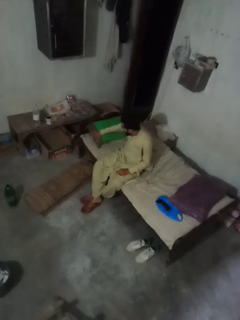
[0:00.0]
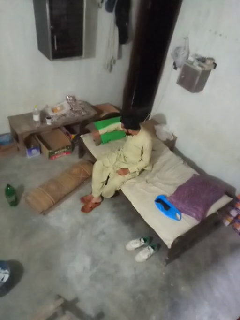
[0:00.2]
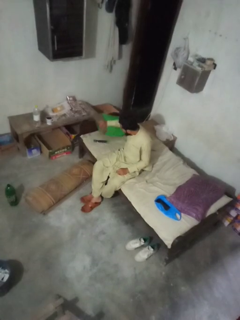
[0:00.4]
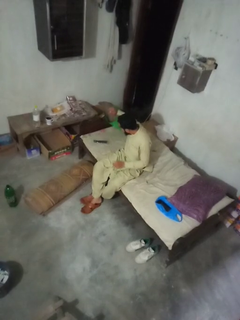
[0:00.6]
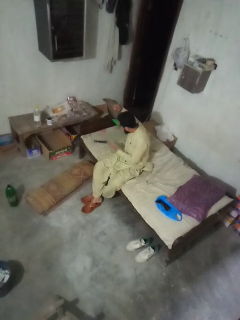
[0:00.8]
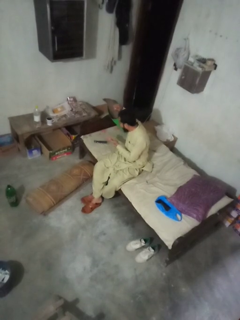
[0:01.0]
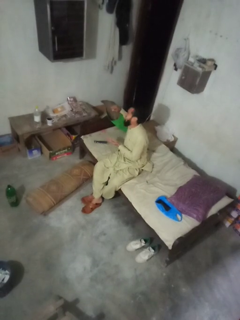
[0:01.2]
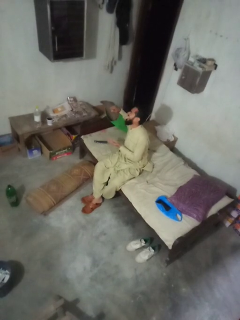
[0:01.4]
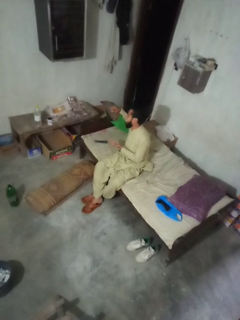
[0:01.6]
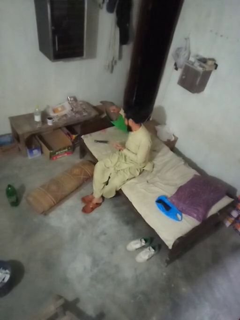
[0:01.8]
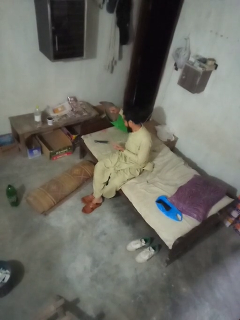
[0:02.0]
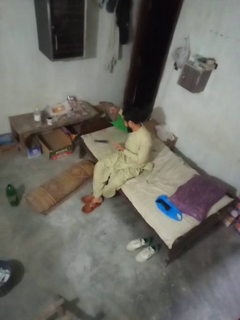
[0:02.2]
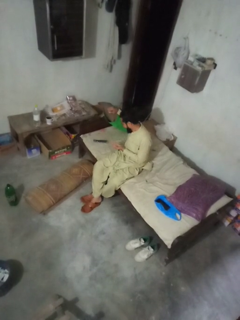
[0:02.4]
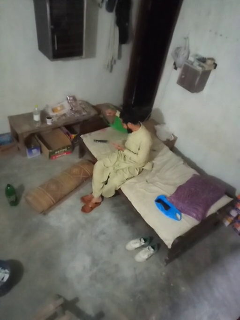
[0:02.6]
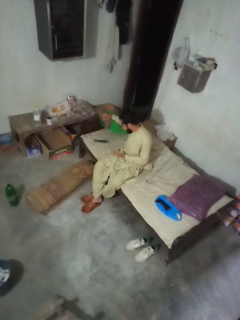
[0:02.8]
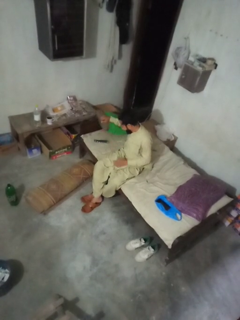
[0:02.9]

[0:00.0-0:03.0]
person searches under couch

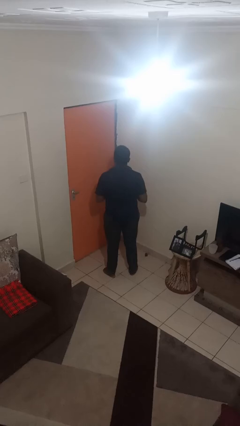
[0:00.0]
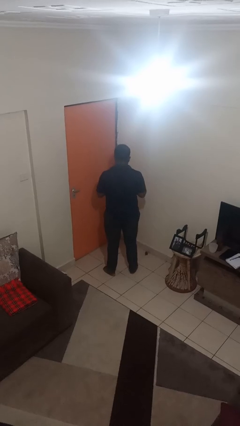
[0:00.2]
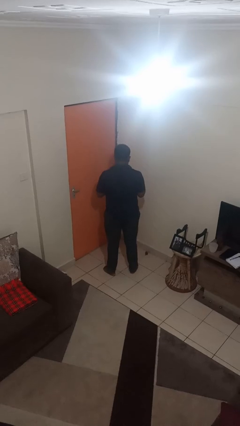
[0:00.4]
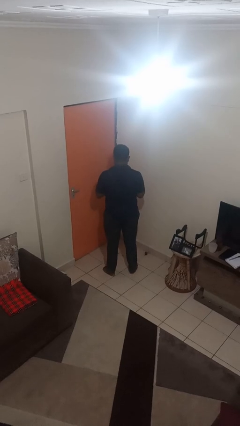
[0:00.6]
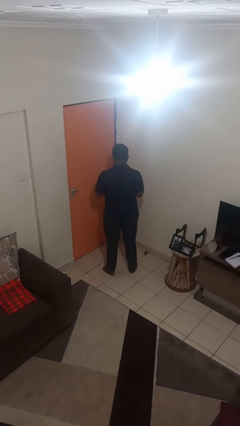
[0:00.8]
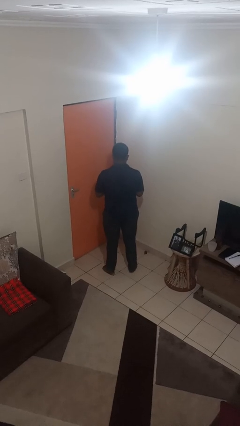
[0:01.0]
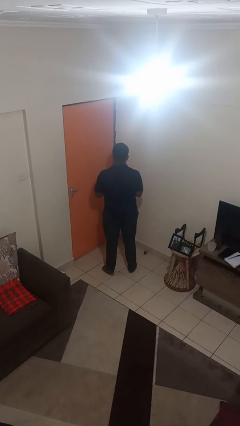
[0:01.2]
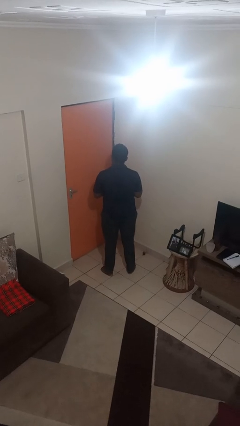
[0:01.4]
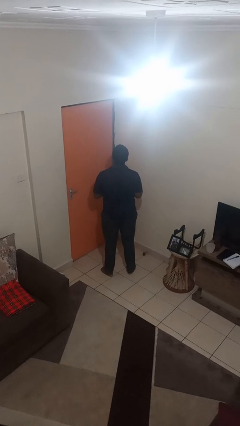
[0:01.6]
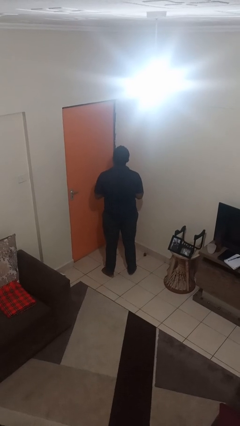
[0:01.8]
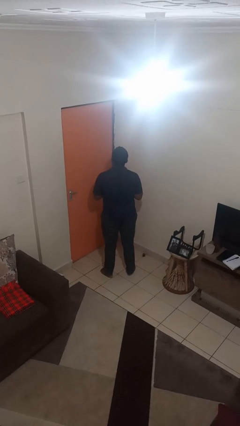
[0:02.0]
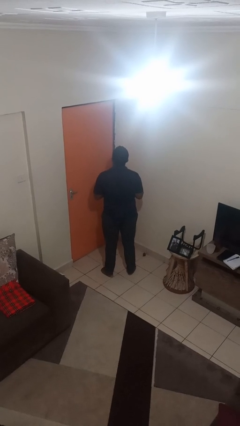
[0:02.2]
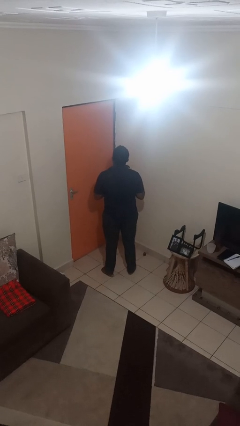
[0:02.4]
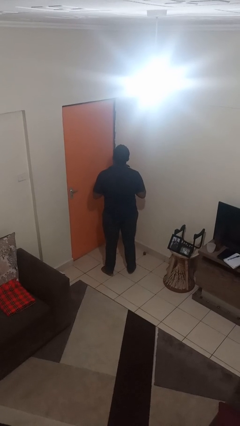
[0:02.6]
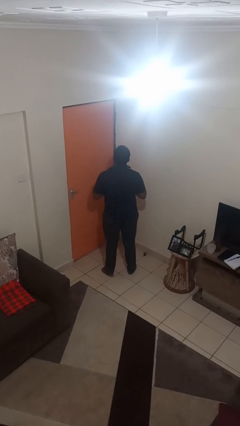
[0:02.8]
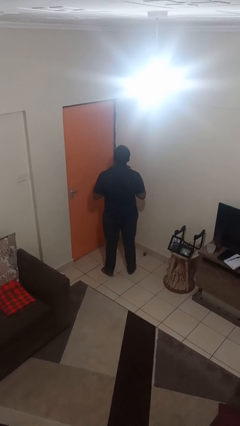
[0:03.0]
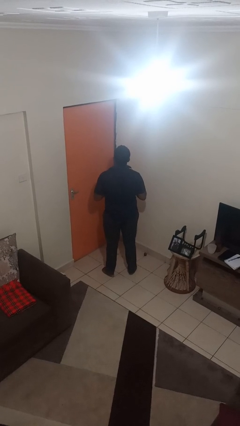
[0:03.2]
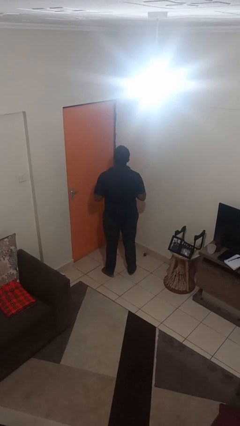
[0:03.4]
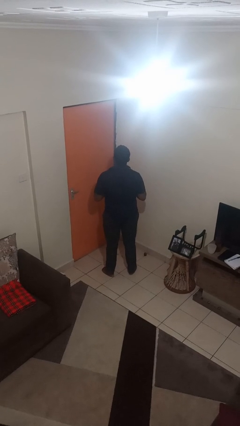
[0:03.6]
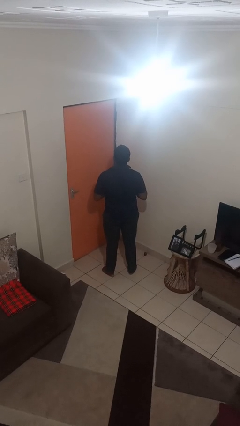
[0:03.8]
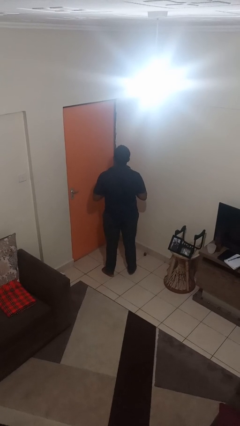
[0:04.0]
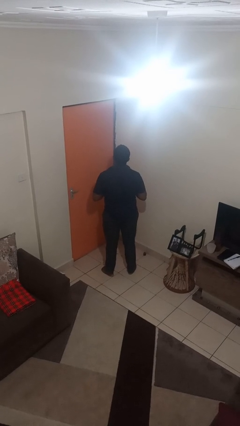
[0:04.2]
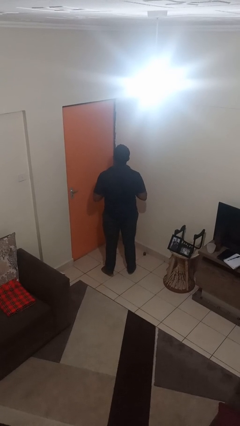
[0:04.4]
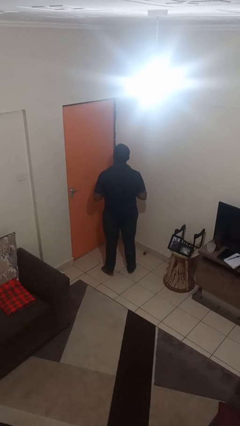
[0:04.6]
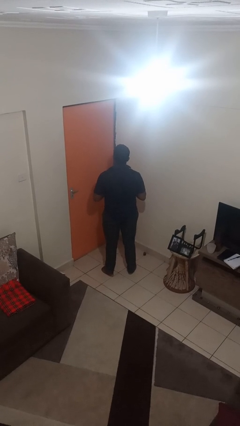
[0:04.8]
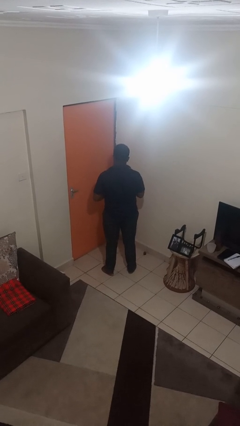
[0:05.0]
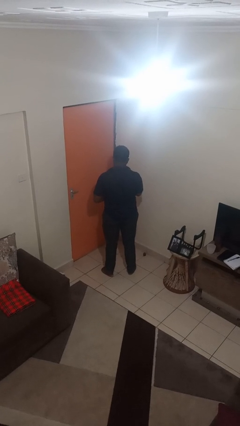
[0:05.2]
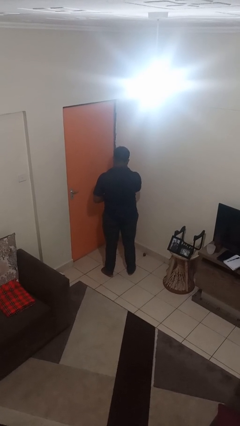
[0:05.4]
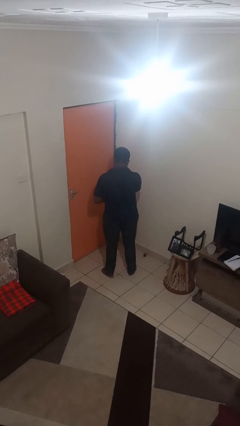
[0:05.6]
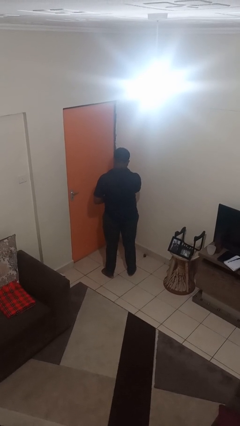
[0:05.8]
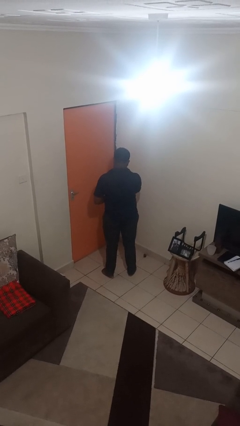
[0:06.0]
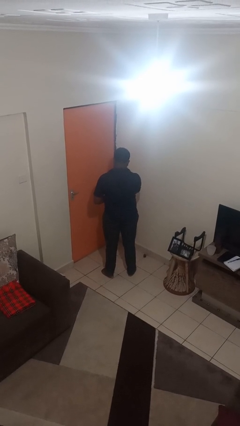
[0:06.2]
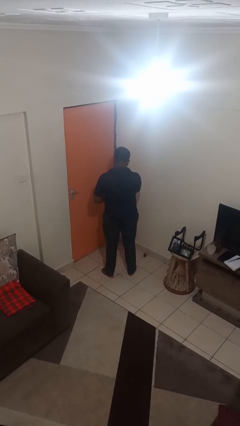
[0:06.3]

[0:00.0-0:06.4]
person unbuttons shirt

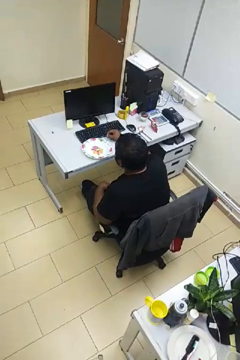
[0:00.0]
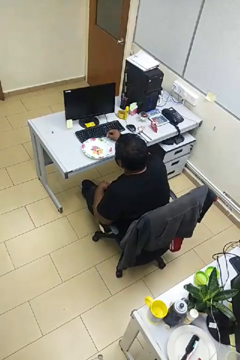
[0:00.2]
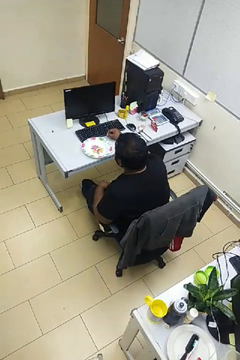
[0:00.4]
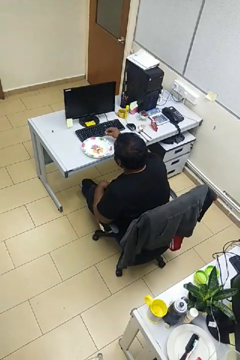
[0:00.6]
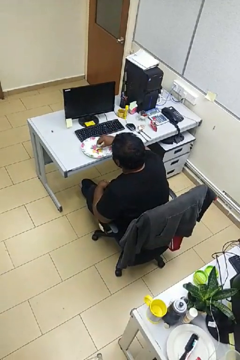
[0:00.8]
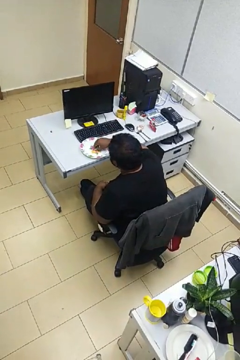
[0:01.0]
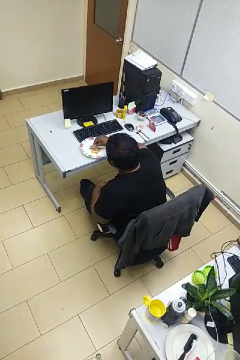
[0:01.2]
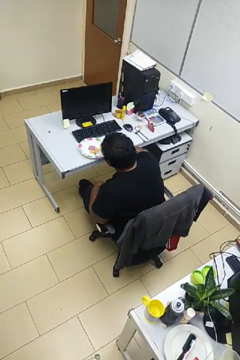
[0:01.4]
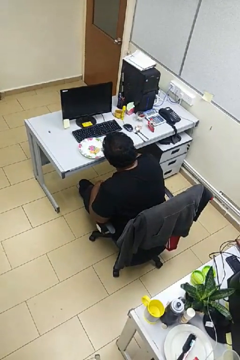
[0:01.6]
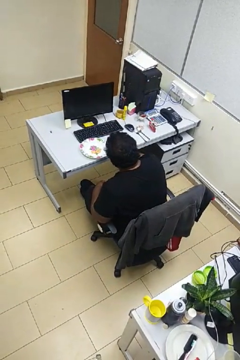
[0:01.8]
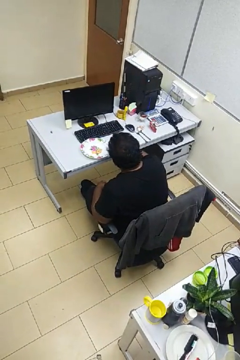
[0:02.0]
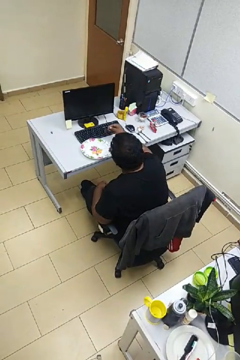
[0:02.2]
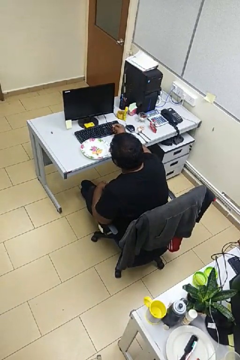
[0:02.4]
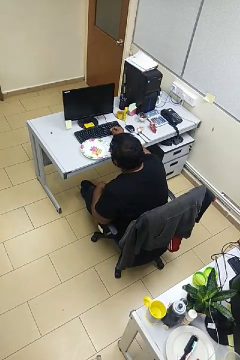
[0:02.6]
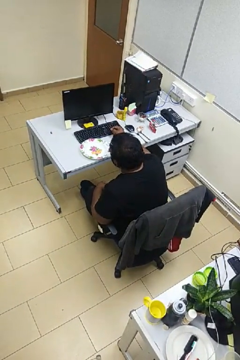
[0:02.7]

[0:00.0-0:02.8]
person eats with hands

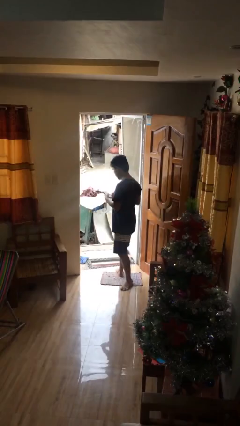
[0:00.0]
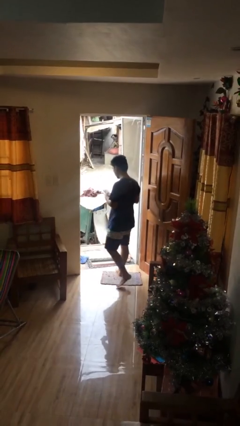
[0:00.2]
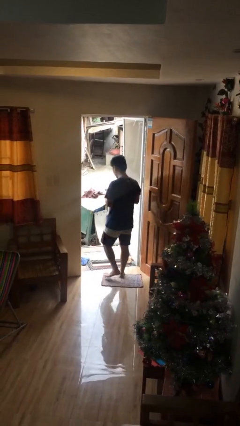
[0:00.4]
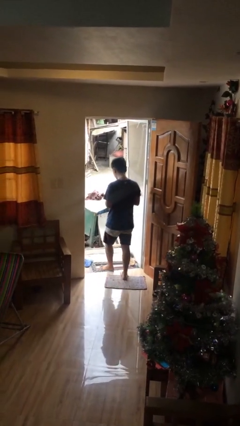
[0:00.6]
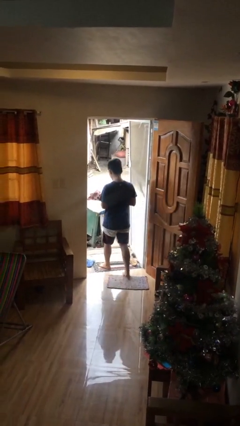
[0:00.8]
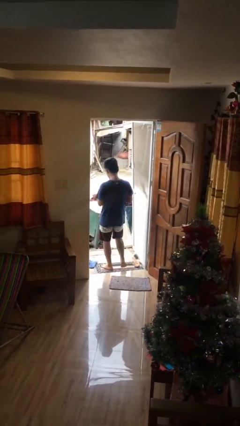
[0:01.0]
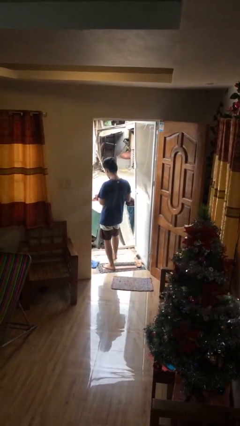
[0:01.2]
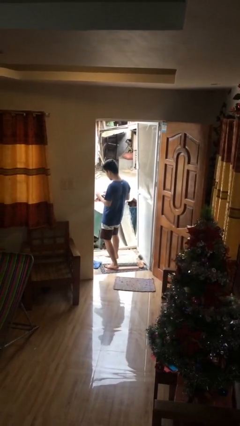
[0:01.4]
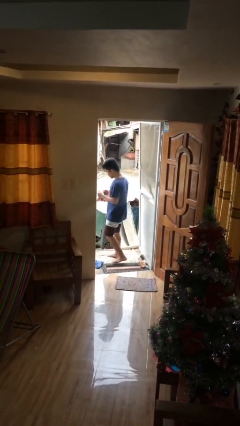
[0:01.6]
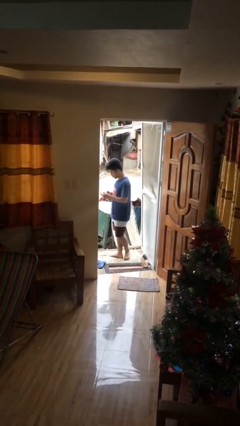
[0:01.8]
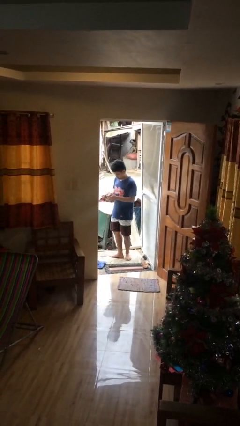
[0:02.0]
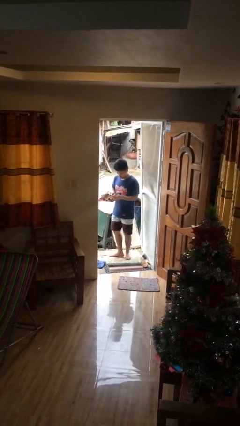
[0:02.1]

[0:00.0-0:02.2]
person exits scene through structure

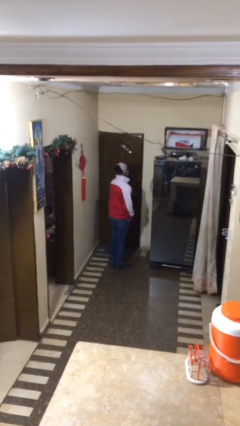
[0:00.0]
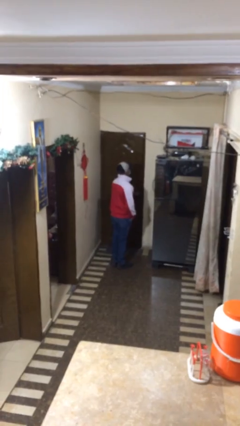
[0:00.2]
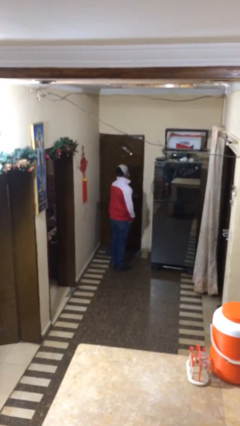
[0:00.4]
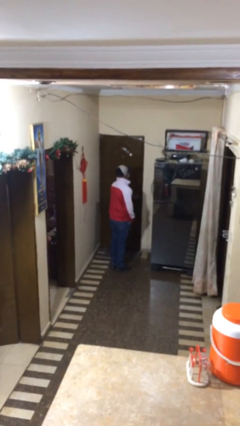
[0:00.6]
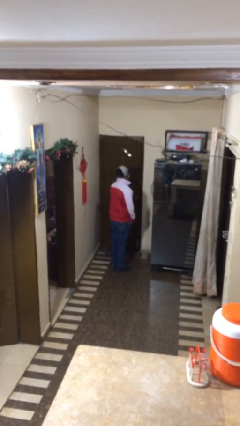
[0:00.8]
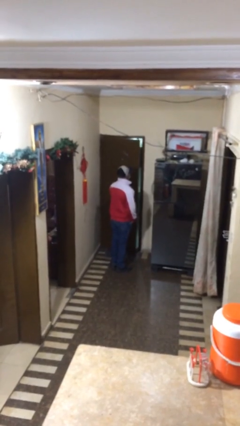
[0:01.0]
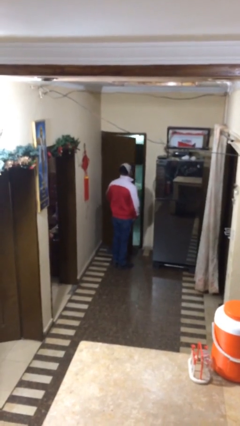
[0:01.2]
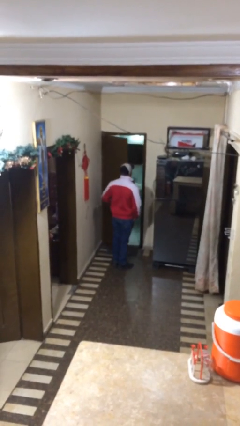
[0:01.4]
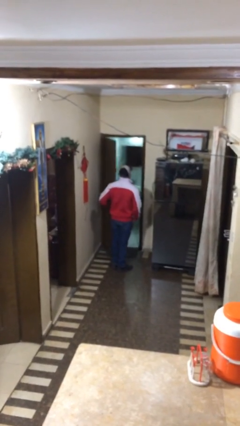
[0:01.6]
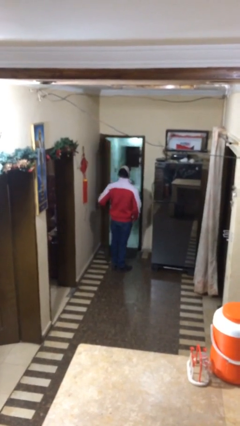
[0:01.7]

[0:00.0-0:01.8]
person opens facility door

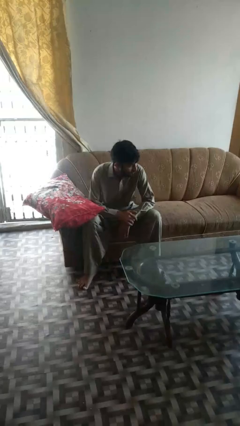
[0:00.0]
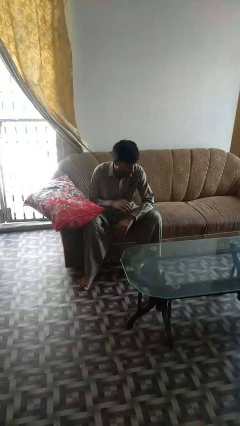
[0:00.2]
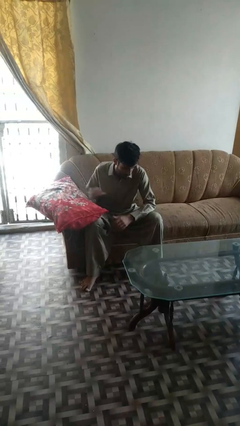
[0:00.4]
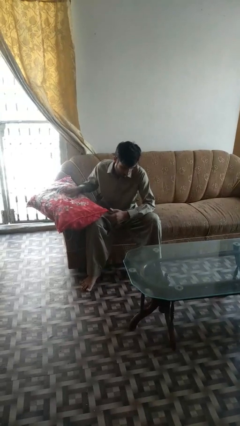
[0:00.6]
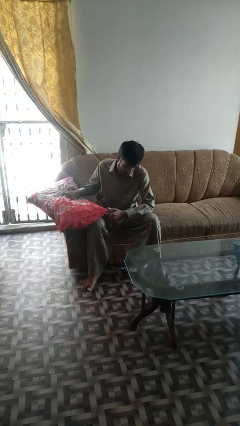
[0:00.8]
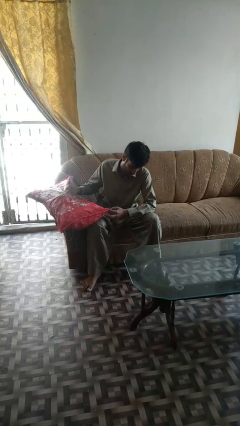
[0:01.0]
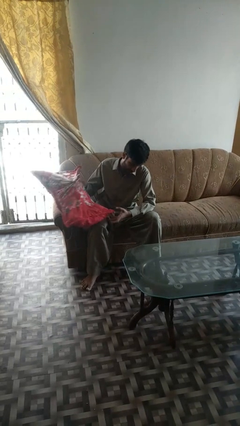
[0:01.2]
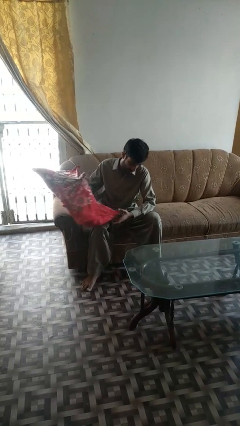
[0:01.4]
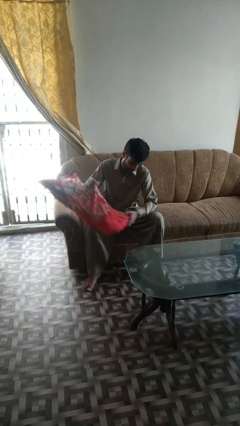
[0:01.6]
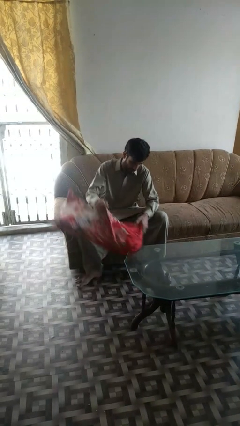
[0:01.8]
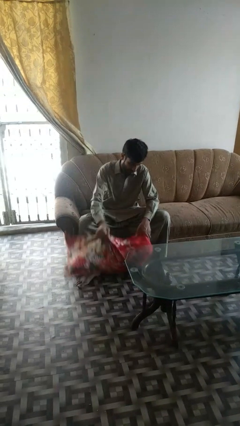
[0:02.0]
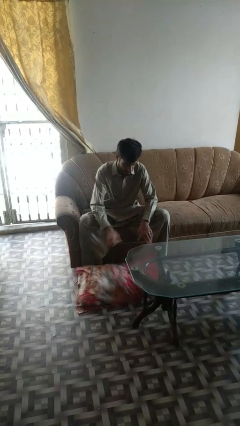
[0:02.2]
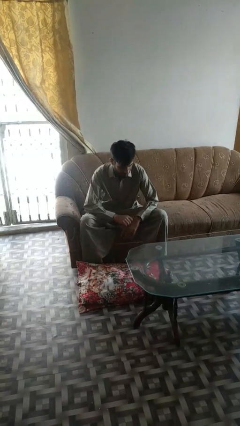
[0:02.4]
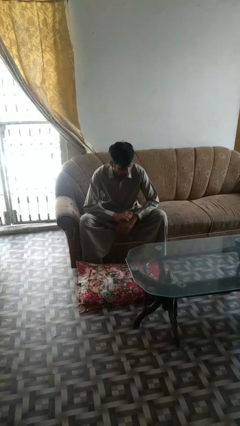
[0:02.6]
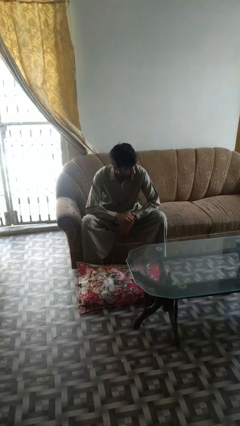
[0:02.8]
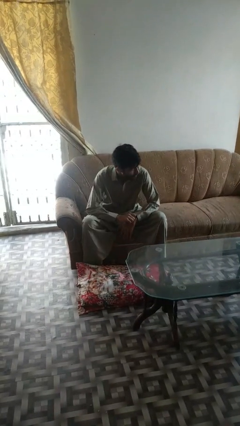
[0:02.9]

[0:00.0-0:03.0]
person drops object
